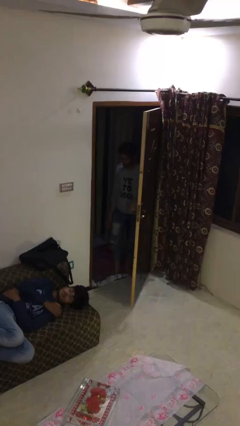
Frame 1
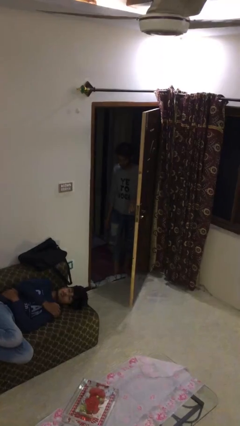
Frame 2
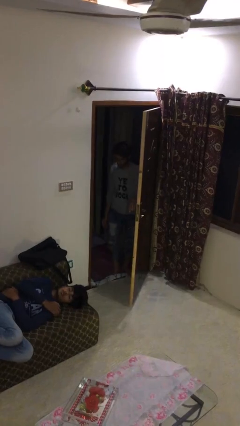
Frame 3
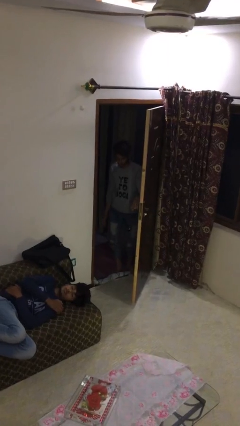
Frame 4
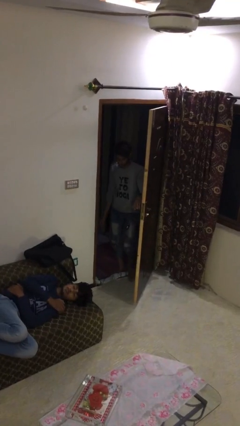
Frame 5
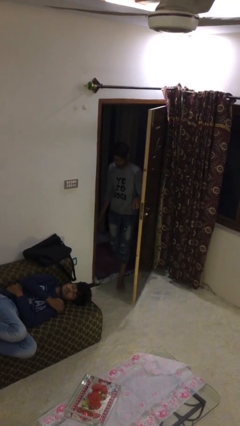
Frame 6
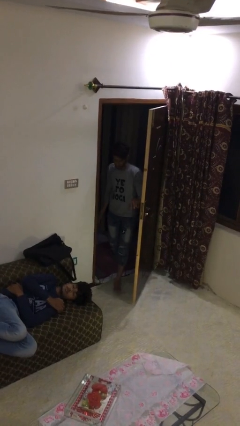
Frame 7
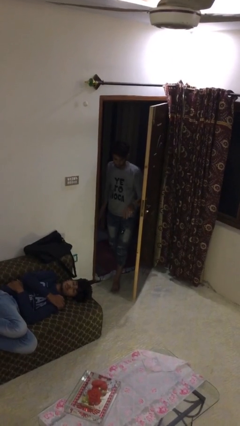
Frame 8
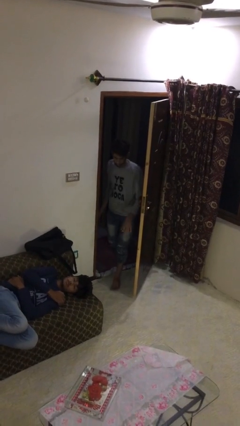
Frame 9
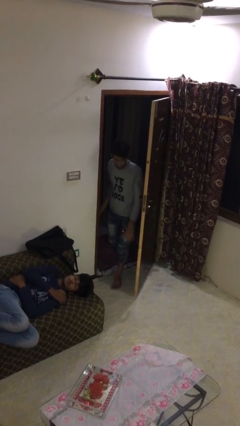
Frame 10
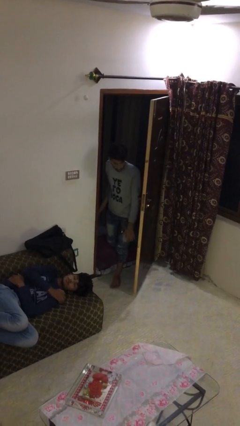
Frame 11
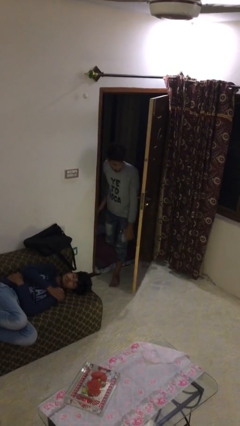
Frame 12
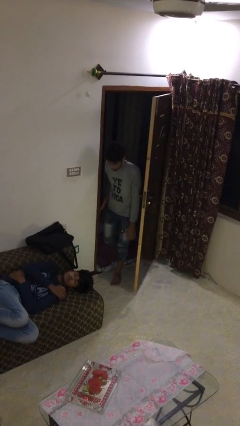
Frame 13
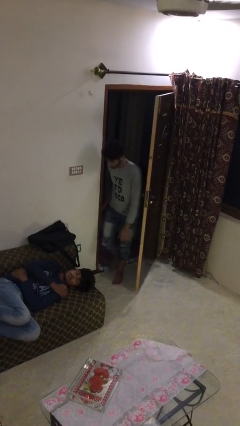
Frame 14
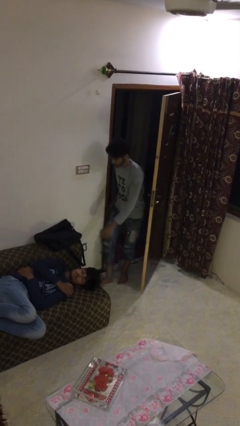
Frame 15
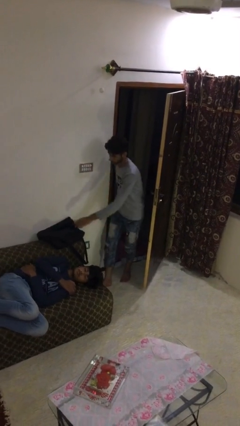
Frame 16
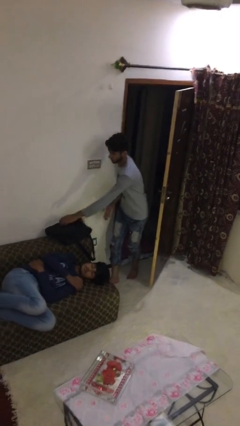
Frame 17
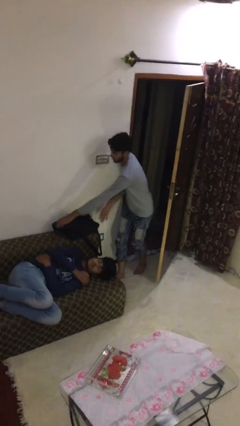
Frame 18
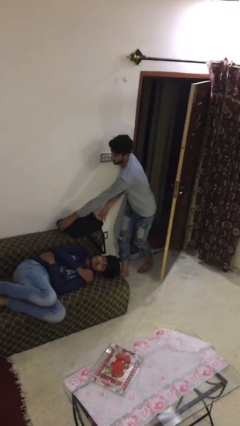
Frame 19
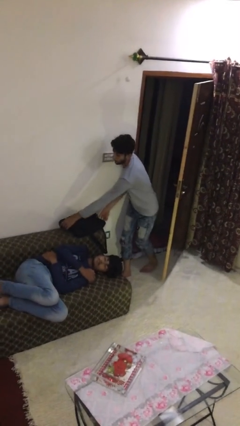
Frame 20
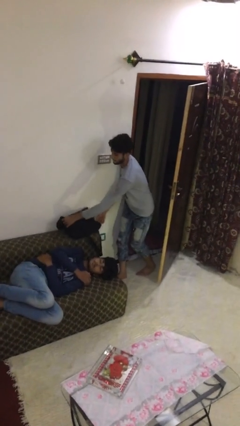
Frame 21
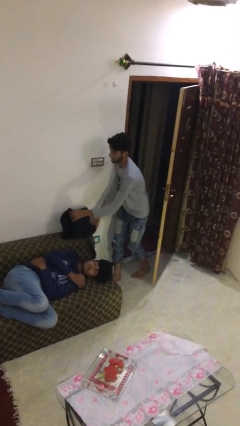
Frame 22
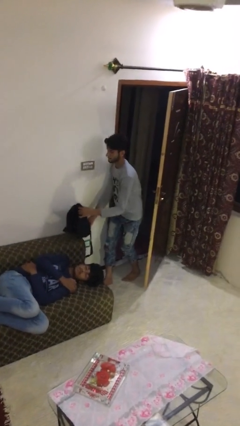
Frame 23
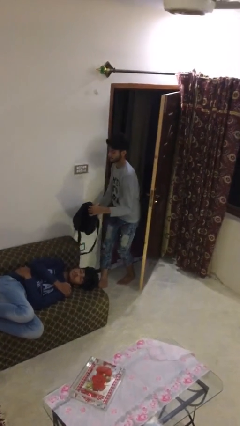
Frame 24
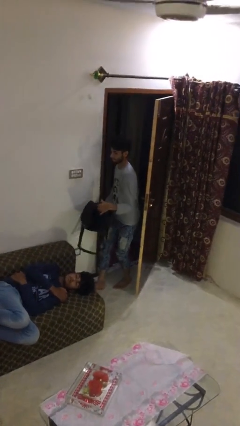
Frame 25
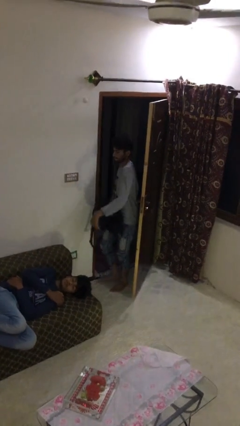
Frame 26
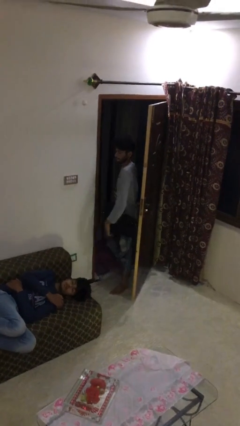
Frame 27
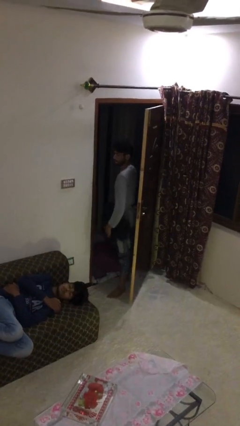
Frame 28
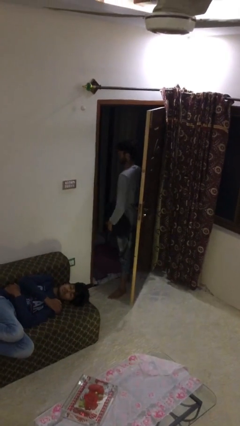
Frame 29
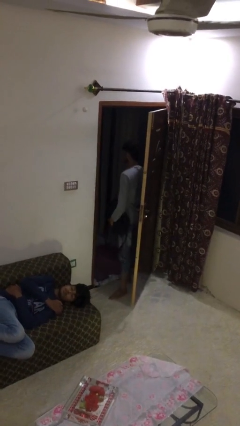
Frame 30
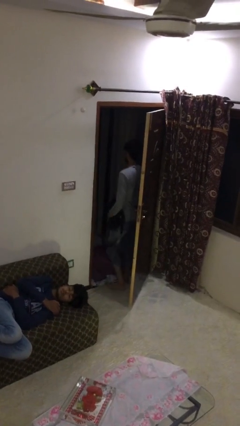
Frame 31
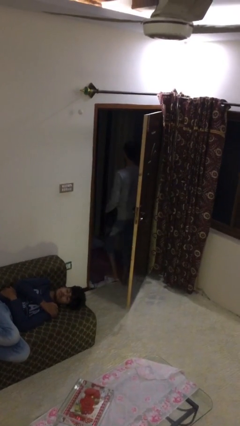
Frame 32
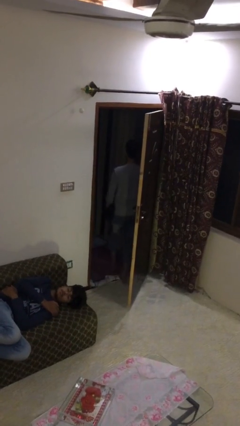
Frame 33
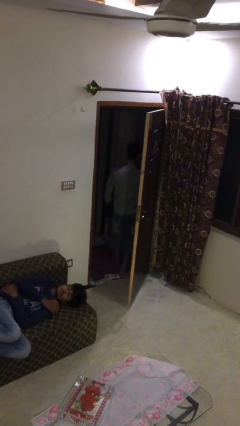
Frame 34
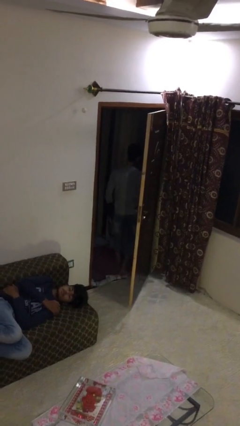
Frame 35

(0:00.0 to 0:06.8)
person steals object from person

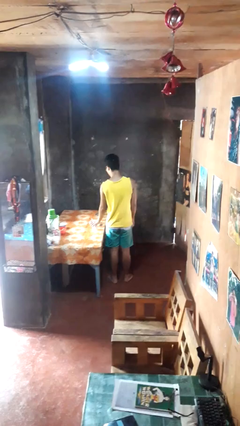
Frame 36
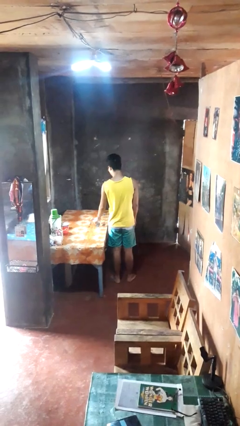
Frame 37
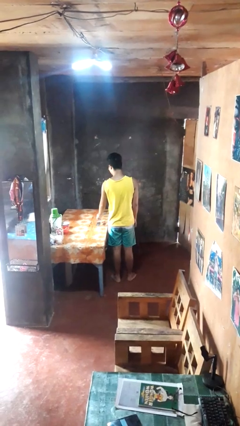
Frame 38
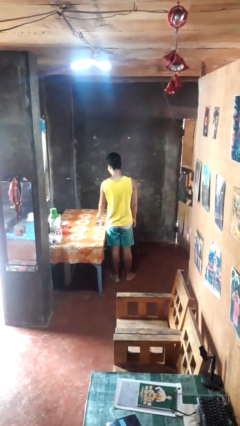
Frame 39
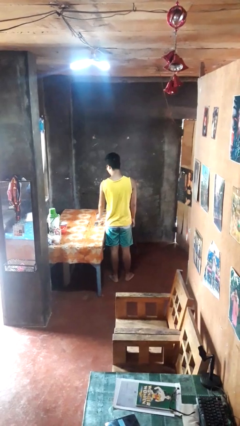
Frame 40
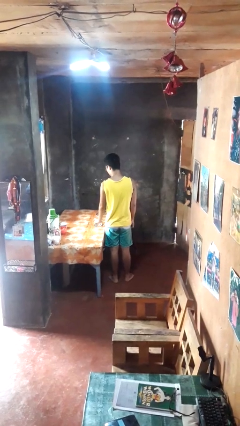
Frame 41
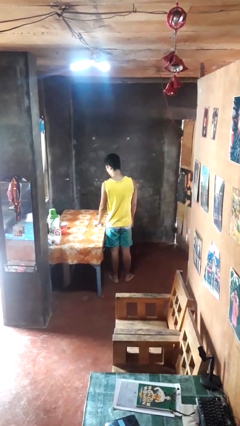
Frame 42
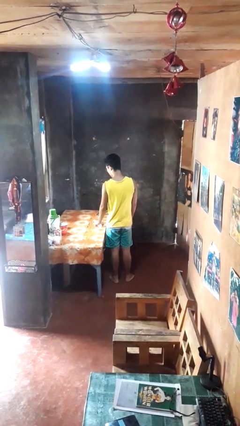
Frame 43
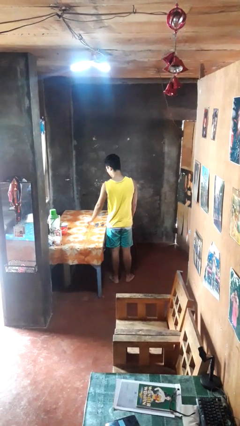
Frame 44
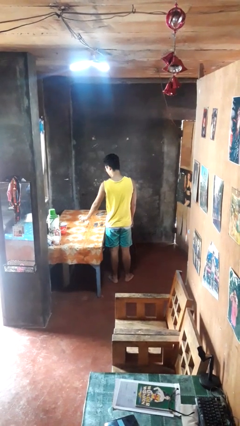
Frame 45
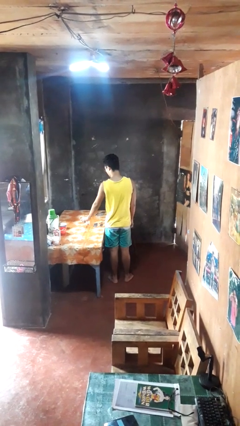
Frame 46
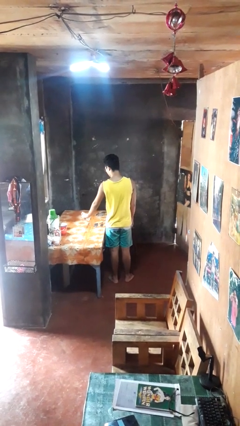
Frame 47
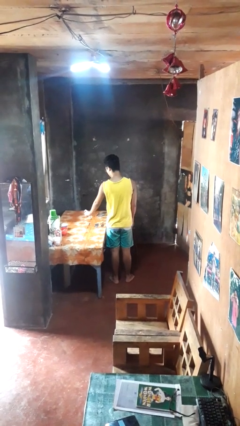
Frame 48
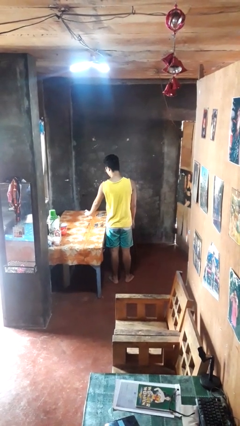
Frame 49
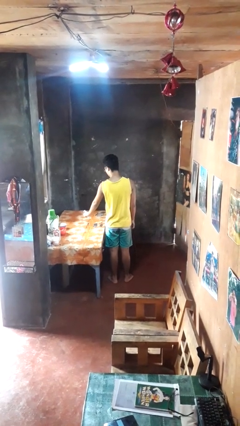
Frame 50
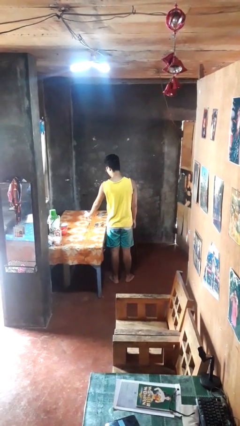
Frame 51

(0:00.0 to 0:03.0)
person sprays from bottle

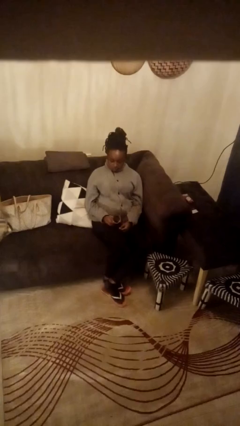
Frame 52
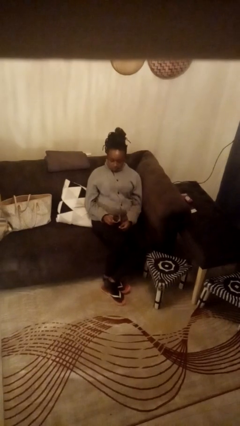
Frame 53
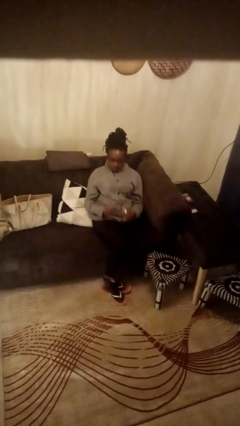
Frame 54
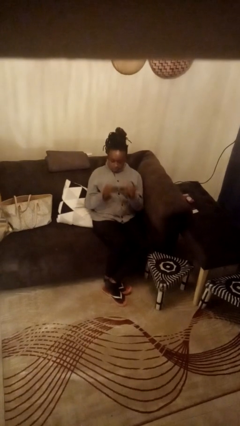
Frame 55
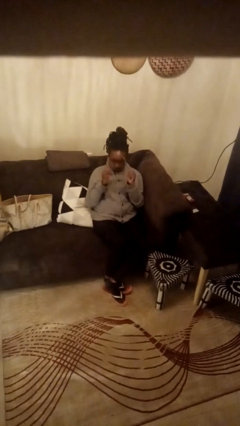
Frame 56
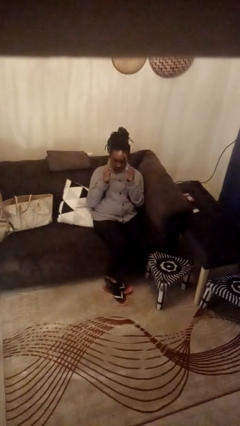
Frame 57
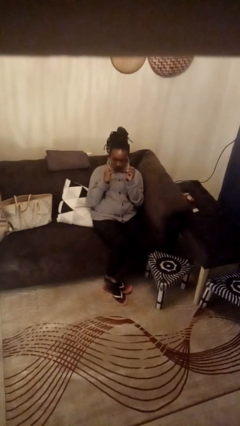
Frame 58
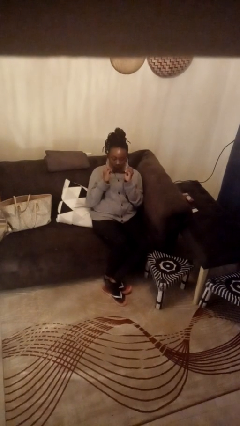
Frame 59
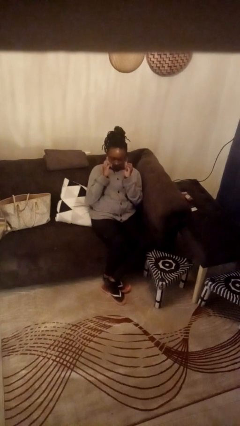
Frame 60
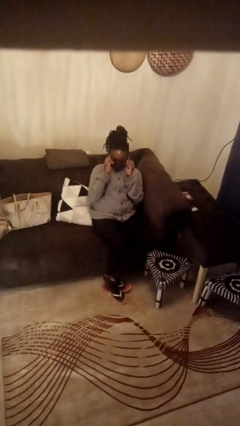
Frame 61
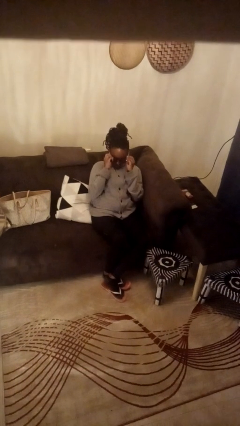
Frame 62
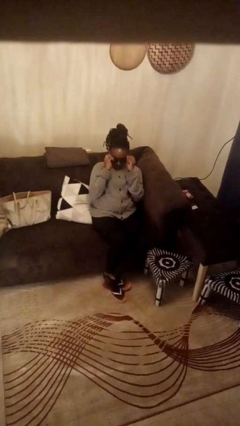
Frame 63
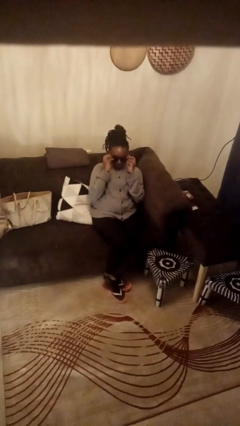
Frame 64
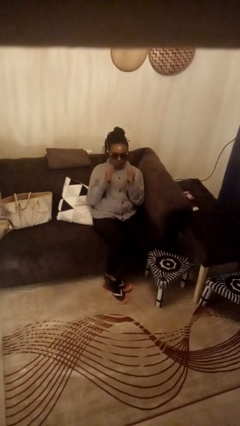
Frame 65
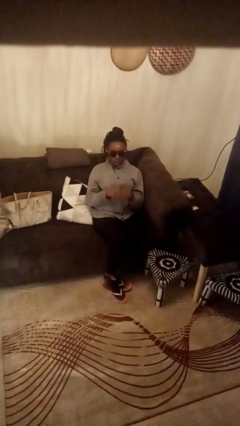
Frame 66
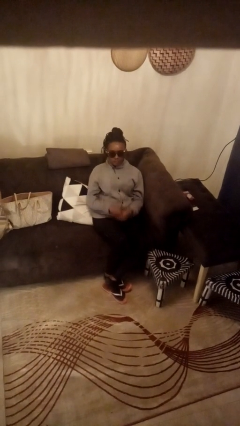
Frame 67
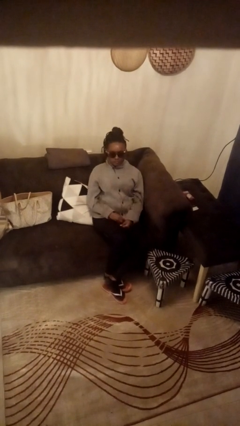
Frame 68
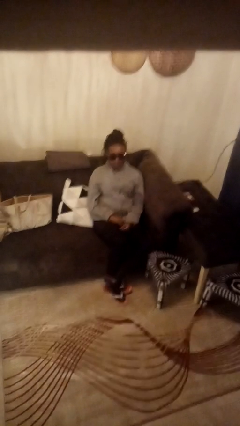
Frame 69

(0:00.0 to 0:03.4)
person puts on sunglasses

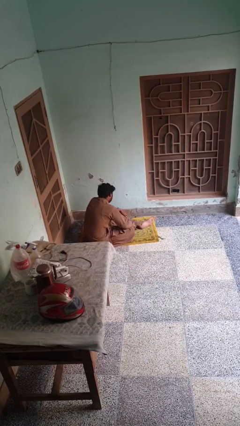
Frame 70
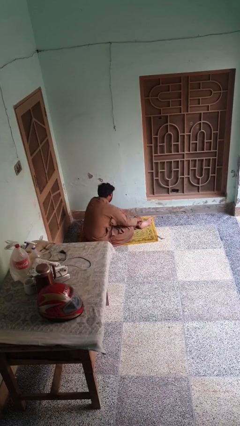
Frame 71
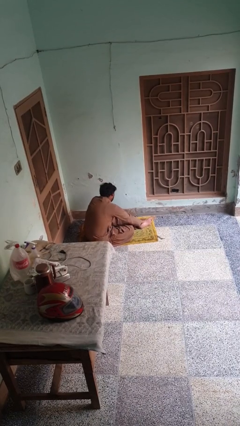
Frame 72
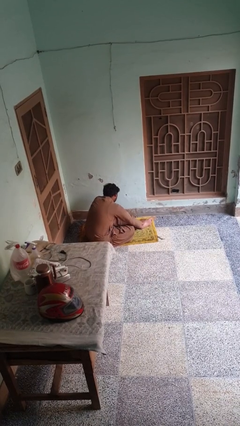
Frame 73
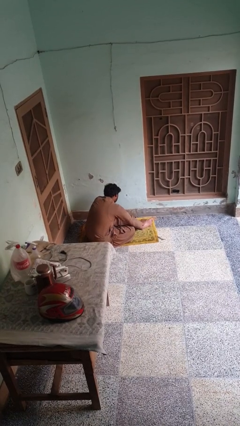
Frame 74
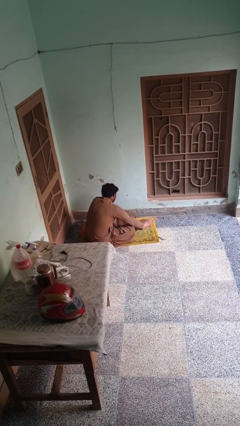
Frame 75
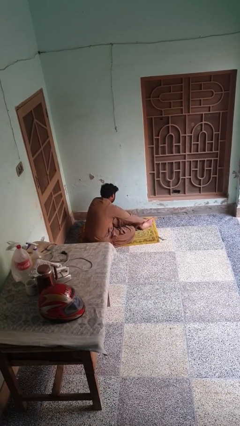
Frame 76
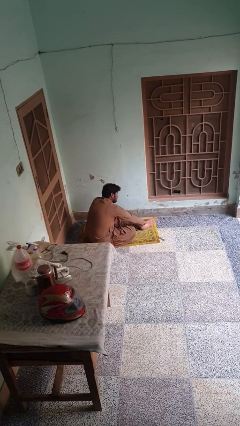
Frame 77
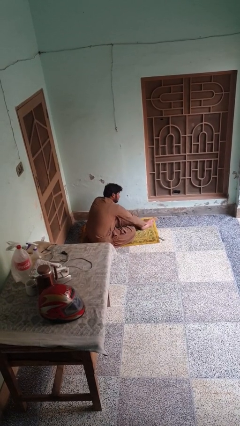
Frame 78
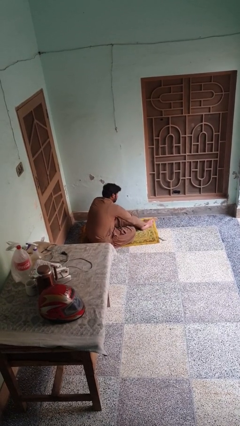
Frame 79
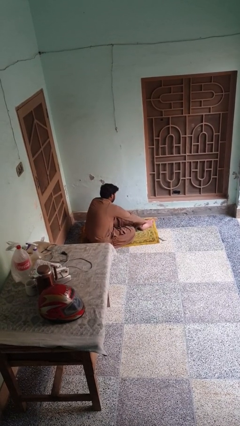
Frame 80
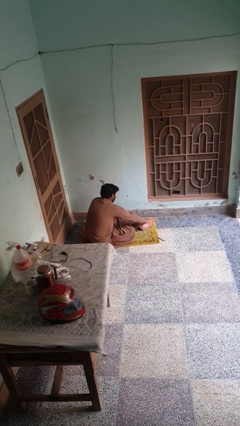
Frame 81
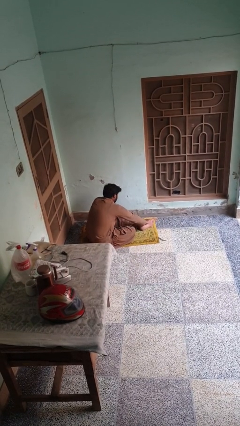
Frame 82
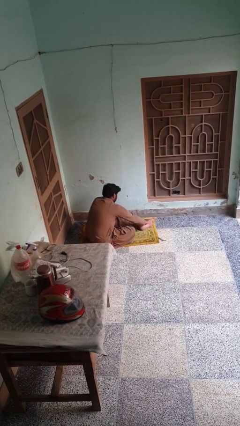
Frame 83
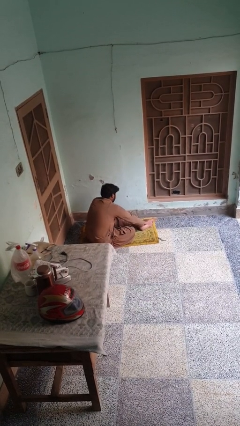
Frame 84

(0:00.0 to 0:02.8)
person rubs foot

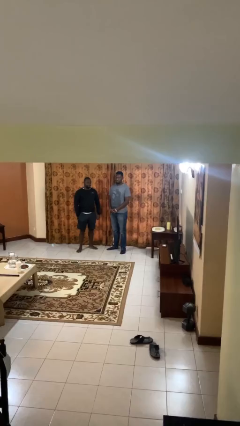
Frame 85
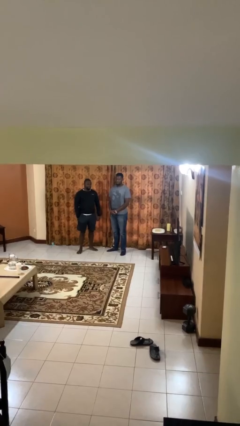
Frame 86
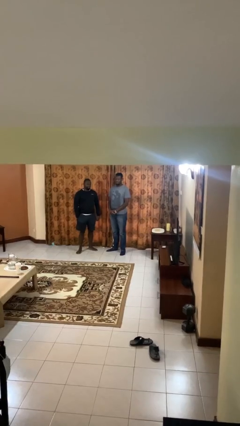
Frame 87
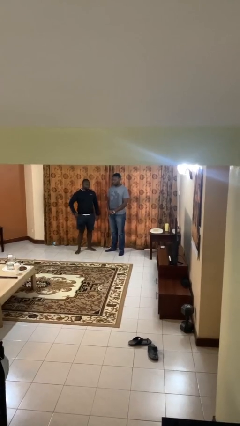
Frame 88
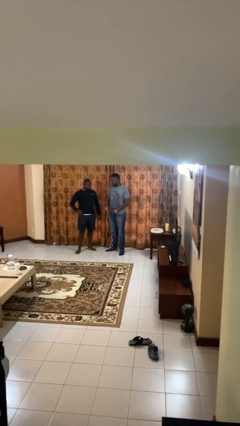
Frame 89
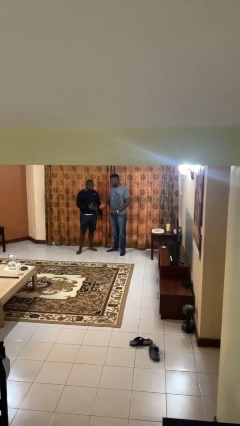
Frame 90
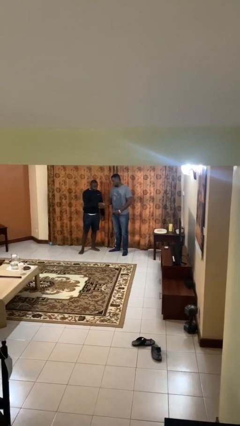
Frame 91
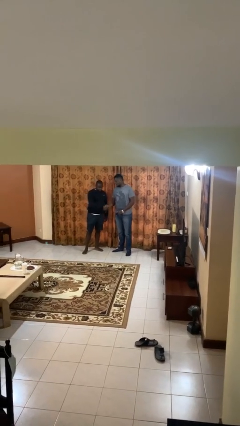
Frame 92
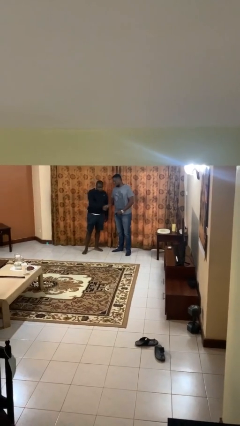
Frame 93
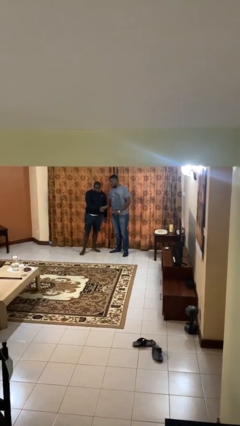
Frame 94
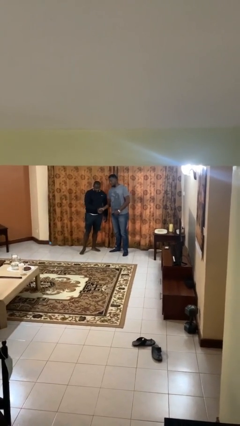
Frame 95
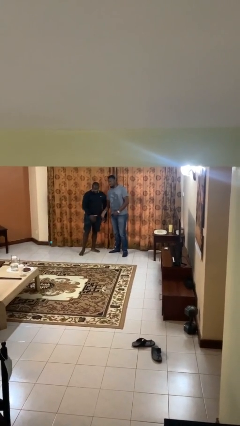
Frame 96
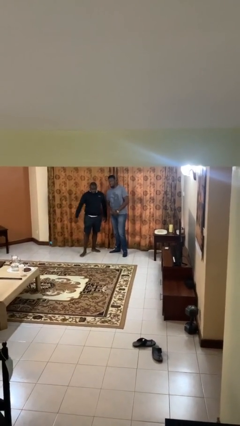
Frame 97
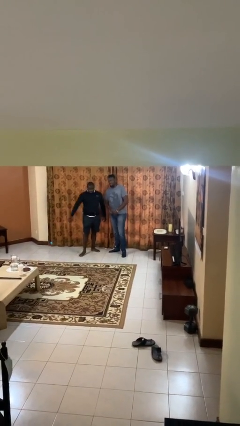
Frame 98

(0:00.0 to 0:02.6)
person shakes hand
